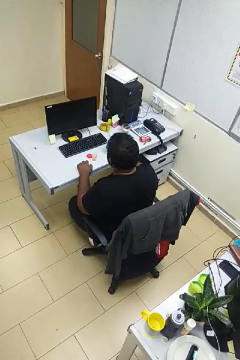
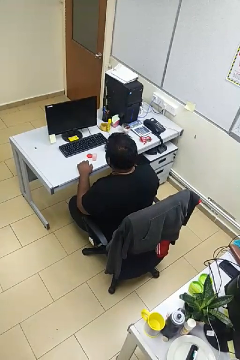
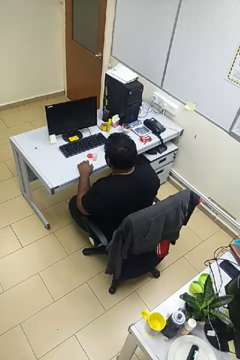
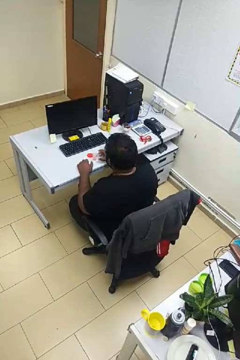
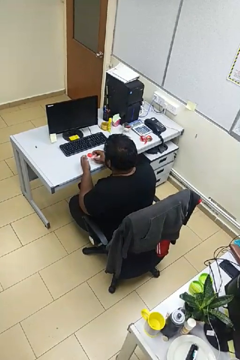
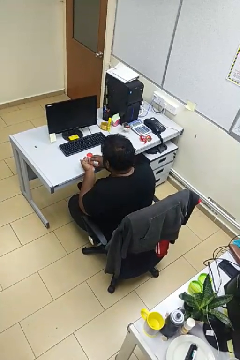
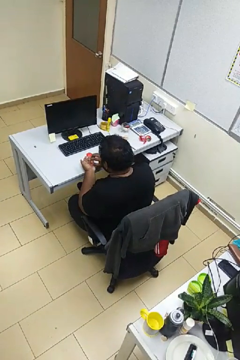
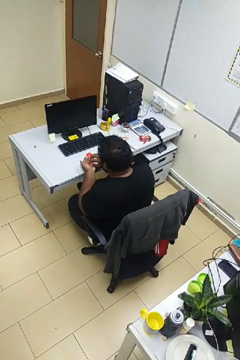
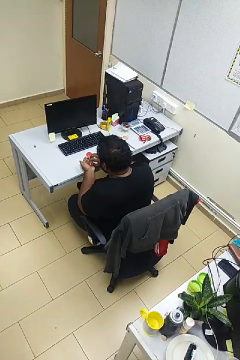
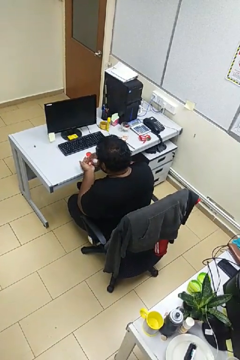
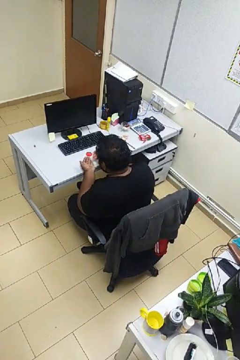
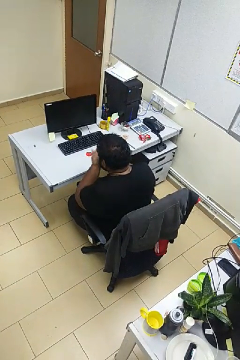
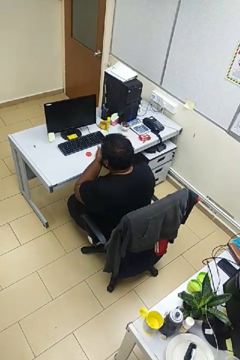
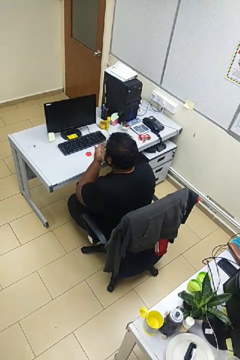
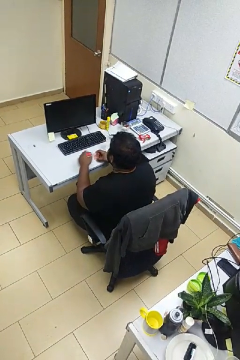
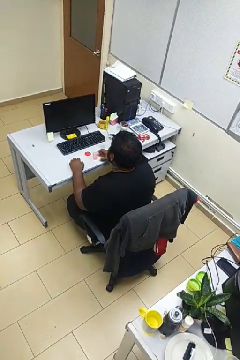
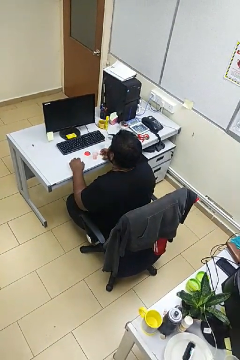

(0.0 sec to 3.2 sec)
person takes medicine pills

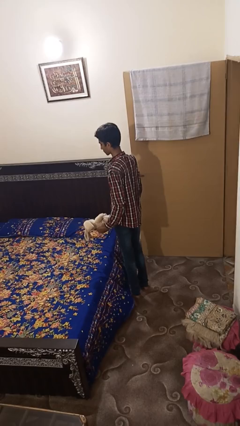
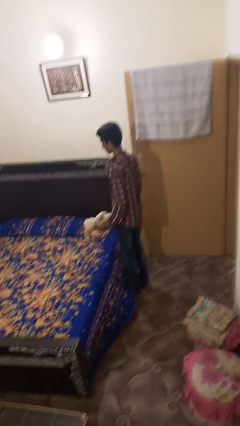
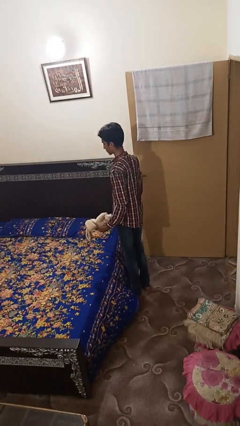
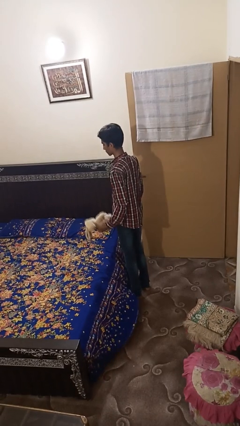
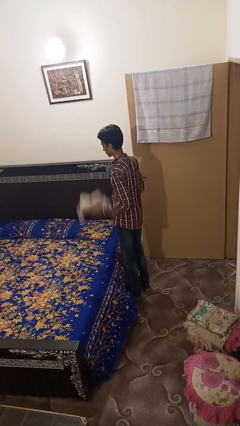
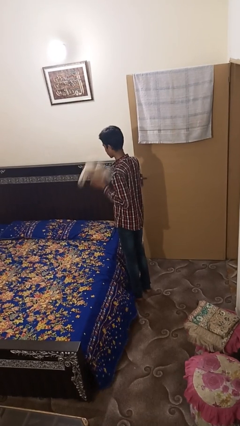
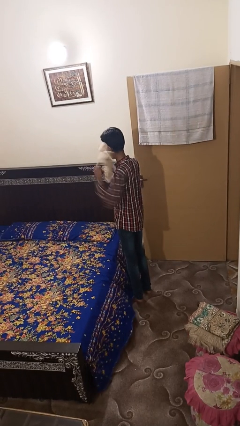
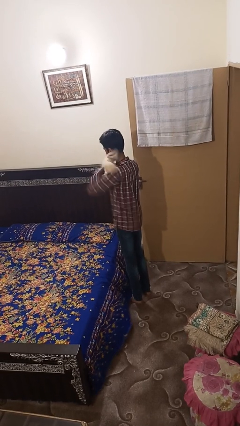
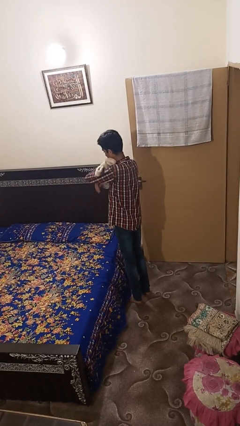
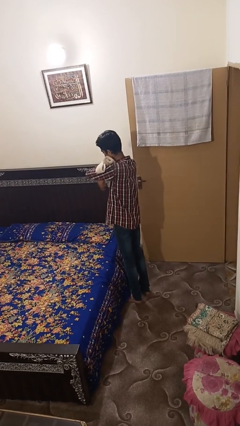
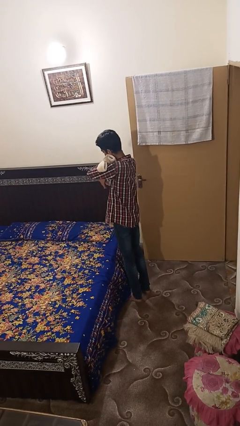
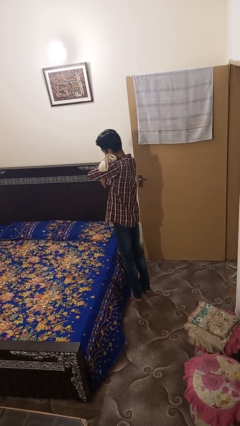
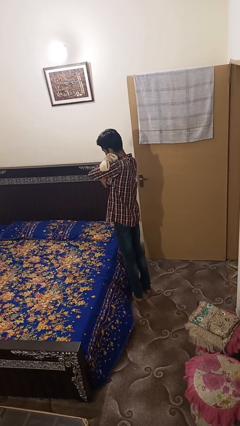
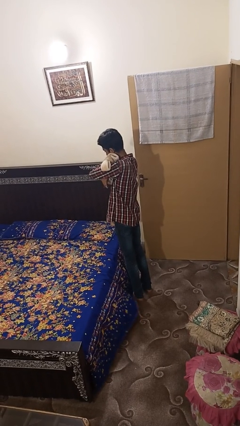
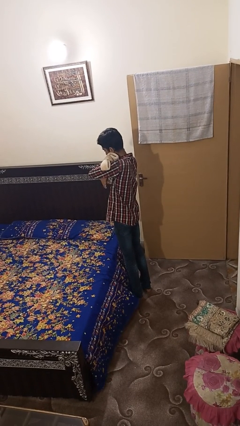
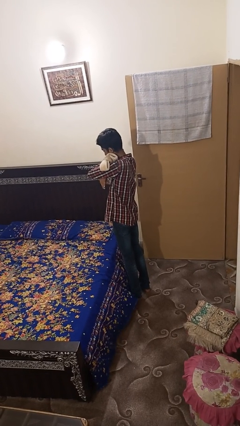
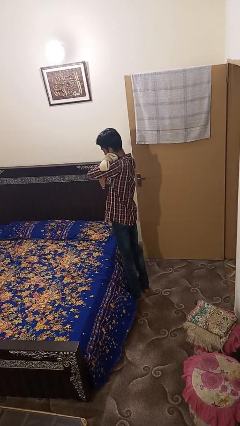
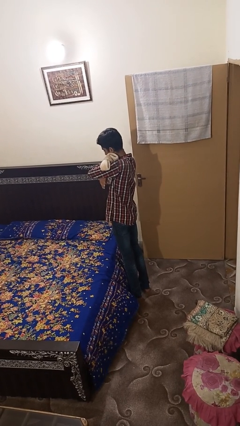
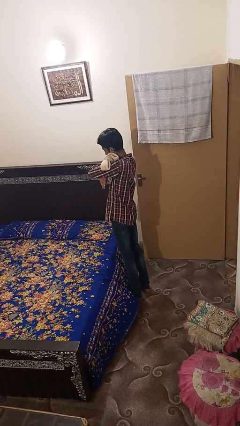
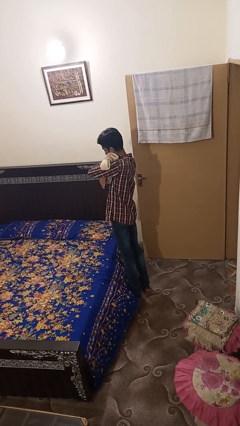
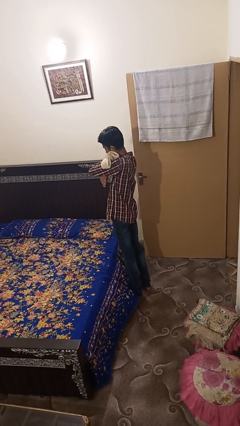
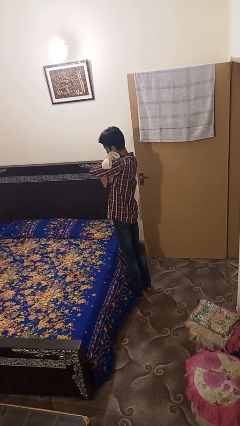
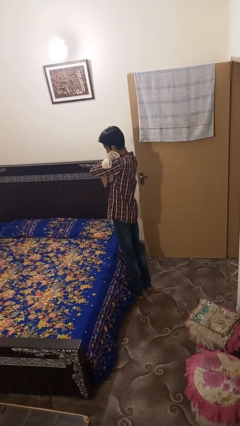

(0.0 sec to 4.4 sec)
person hugs stuffed animal

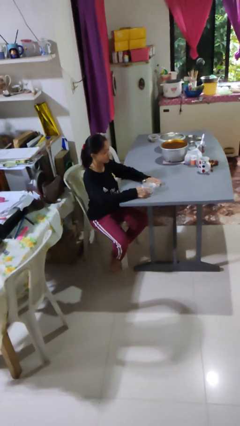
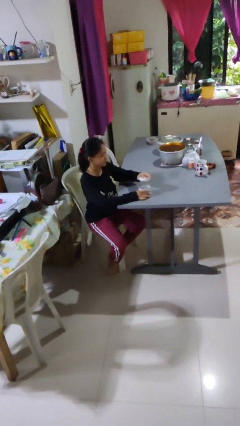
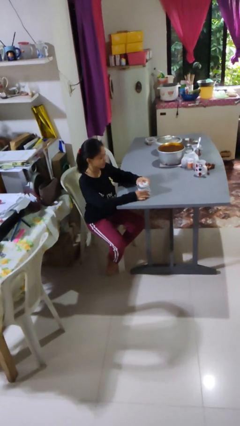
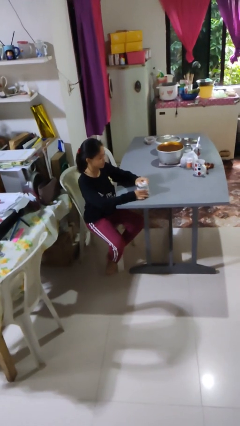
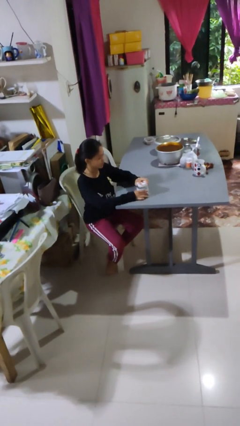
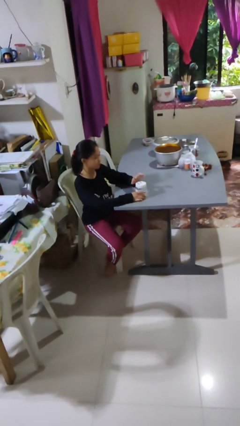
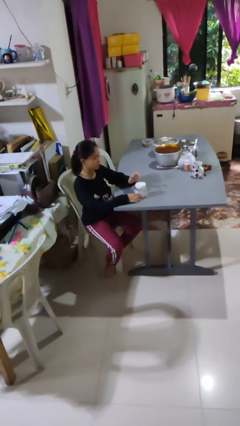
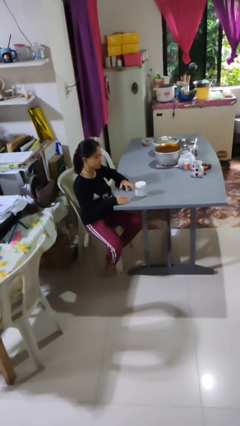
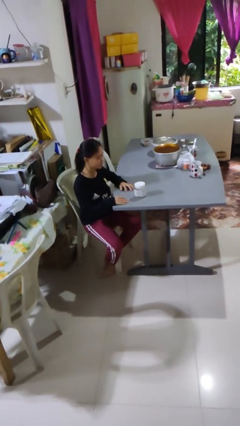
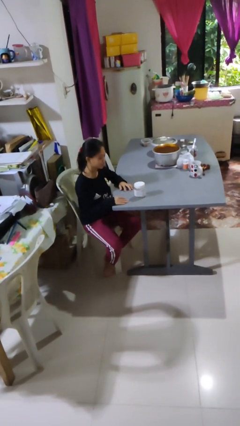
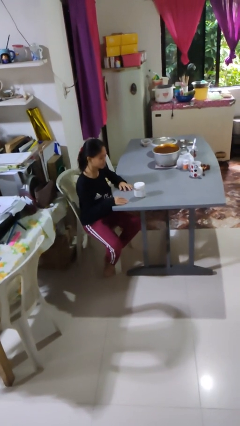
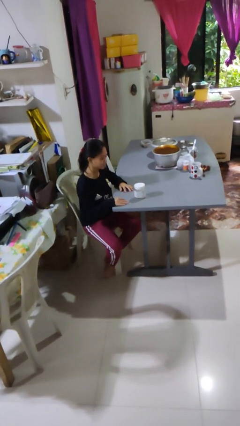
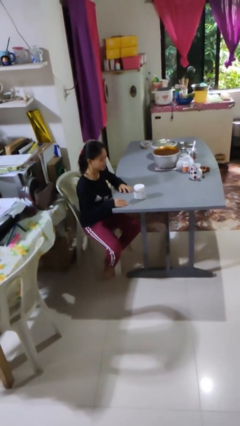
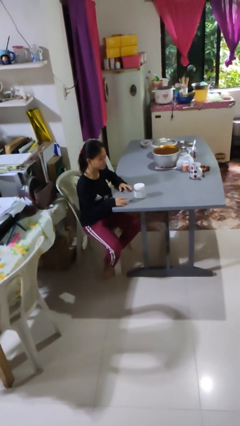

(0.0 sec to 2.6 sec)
person closes jar

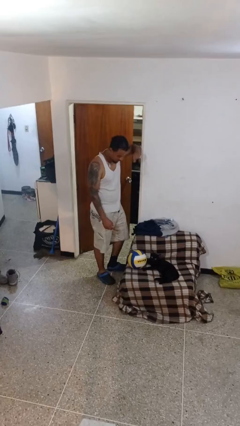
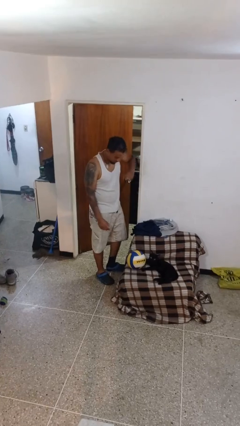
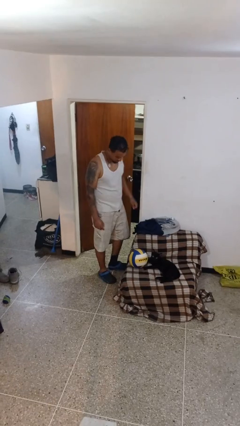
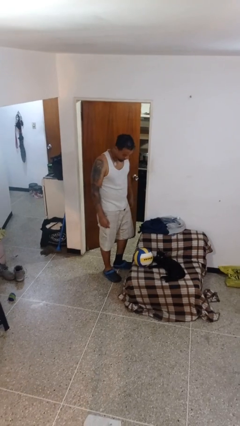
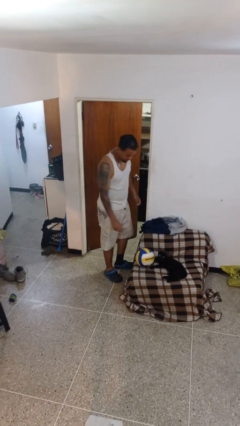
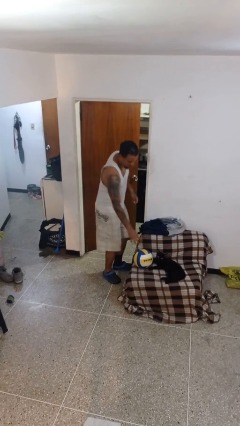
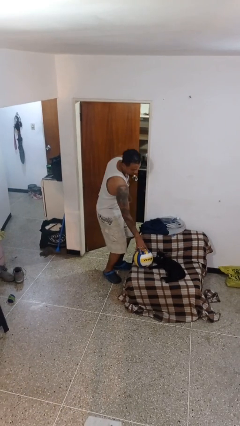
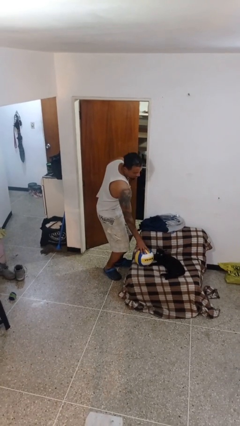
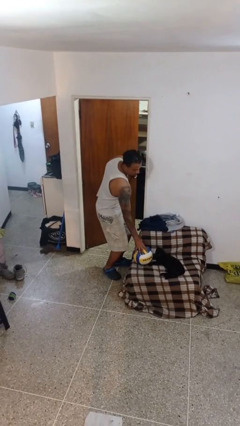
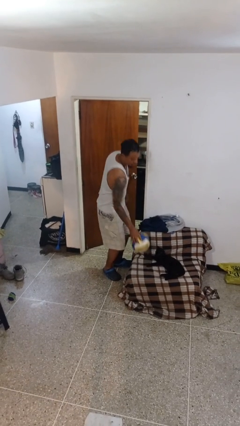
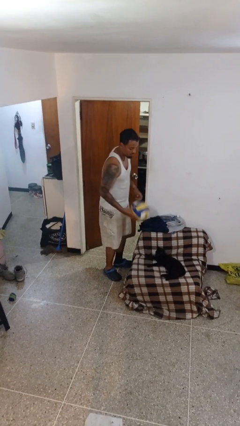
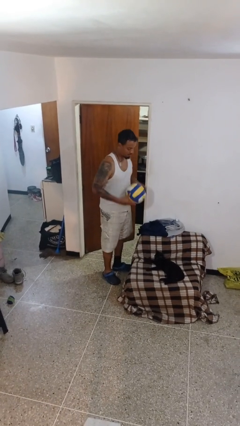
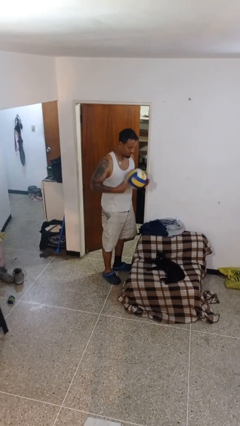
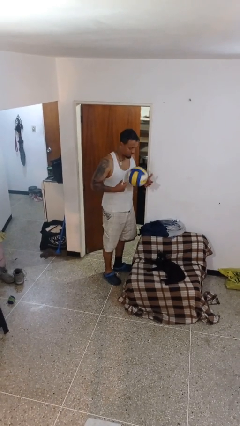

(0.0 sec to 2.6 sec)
person picks up object from couch

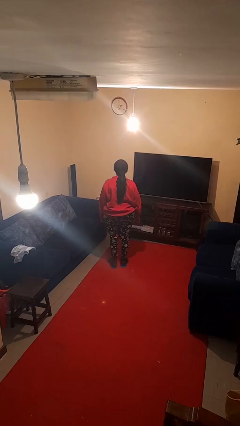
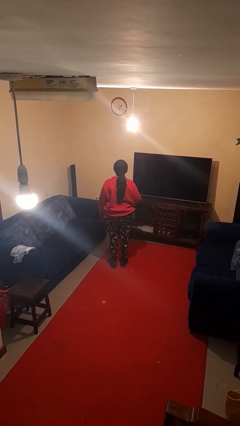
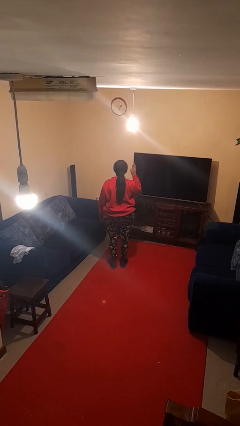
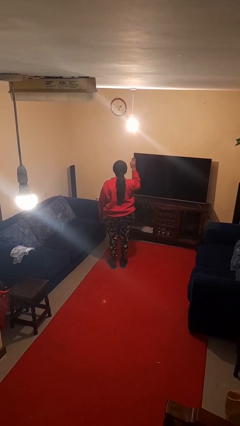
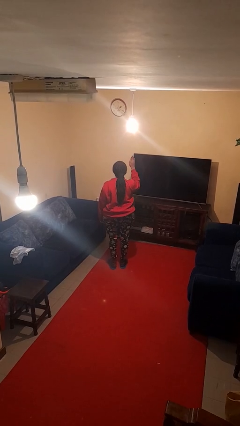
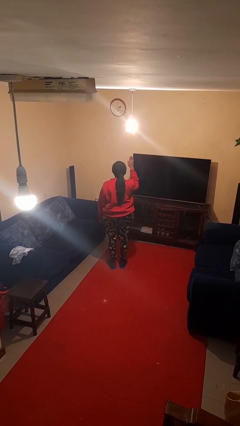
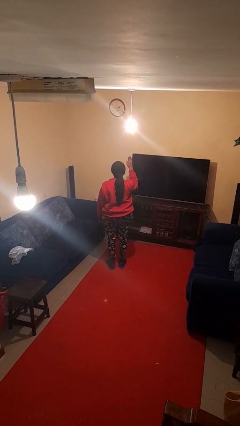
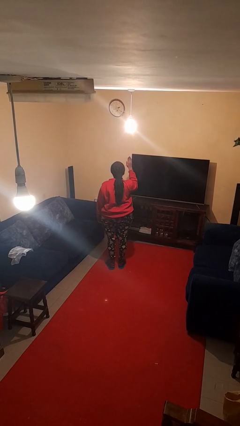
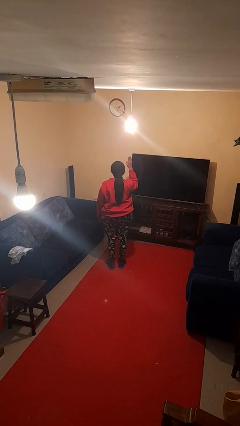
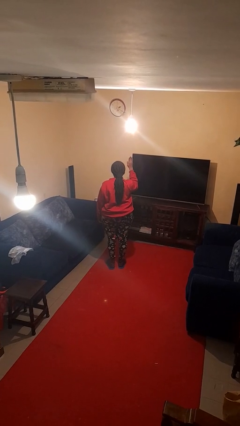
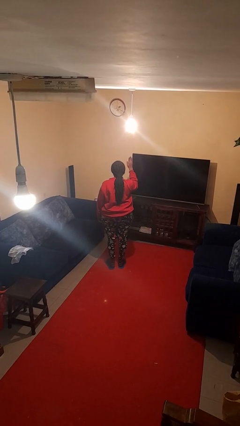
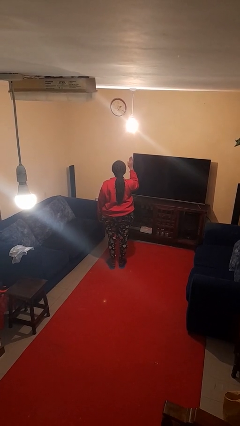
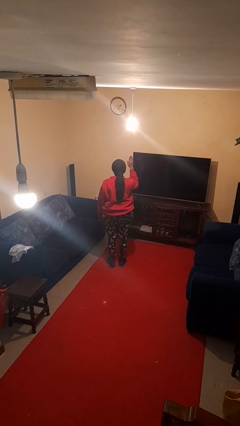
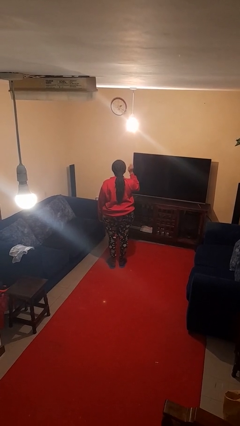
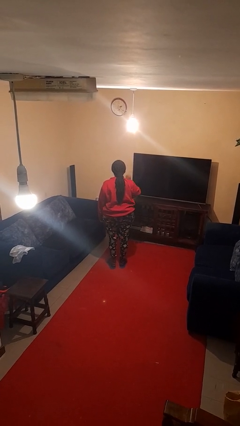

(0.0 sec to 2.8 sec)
person gestures stop

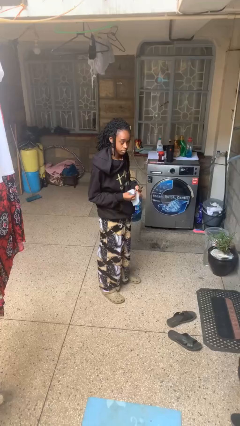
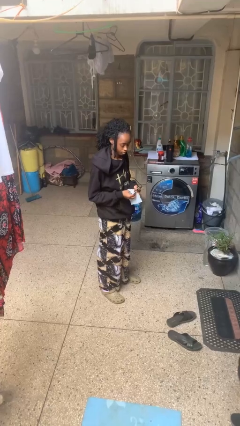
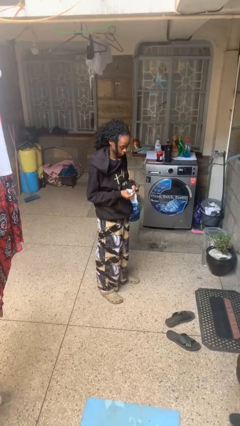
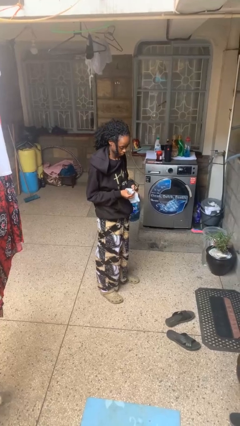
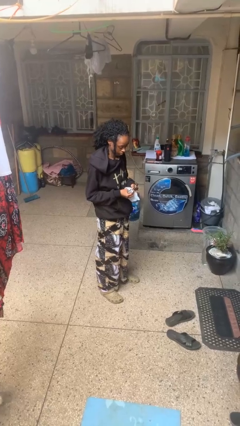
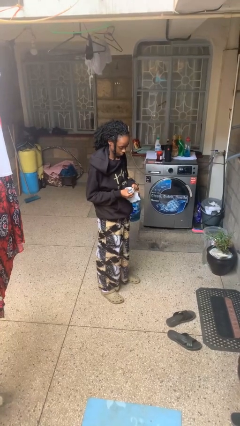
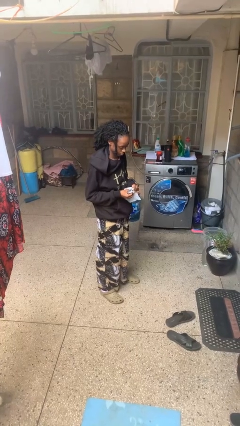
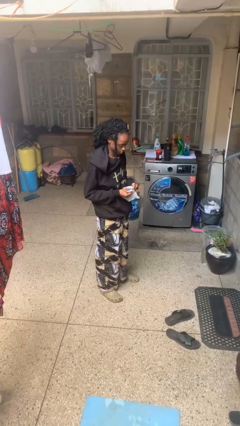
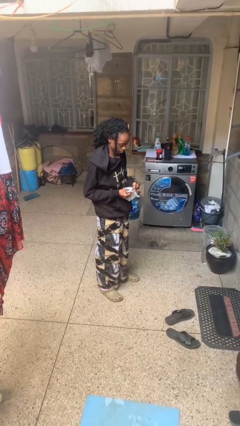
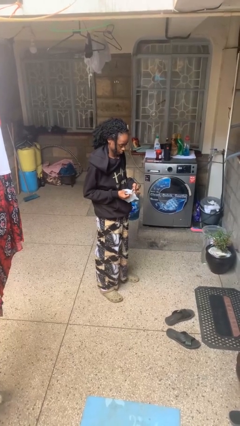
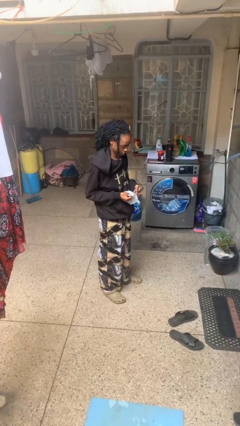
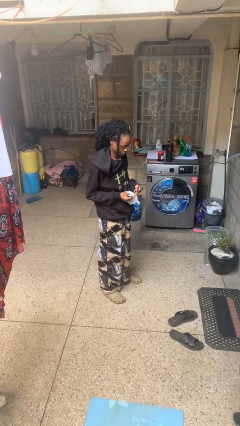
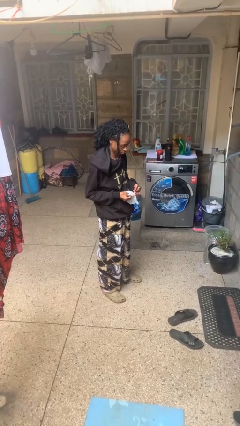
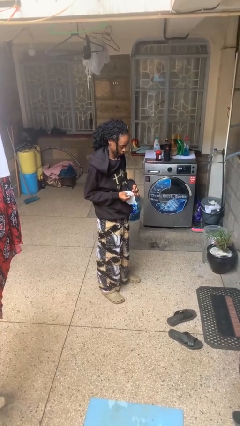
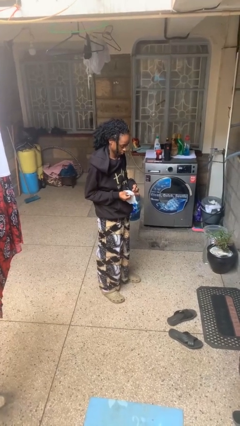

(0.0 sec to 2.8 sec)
person cleans eyeglasses
